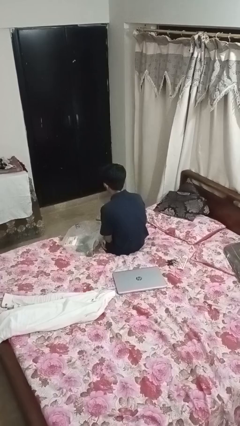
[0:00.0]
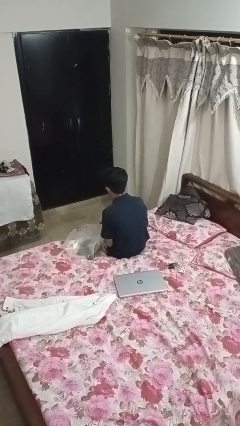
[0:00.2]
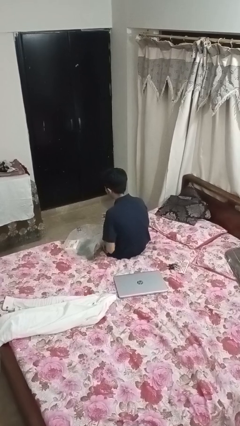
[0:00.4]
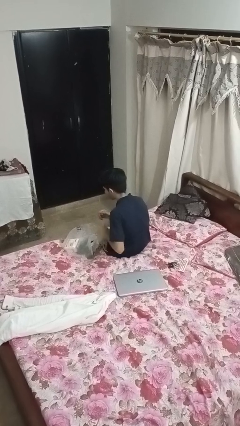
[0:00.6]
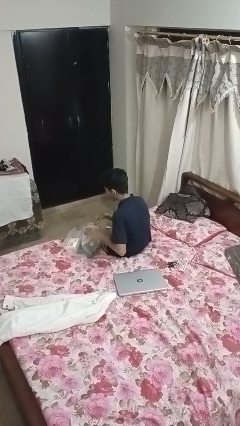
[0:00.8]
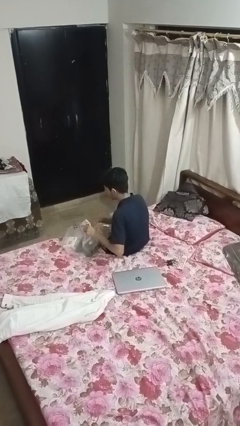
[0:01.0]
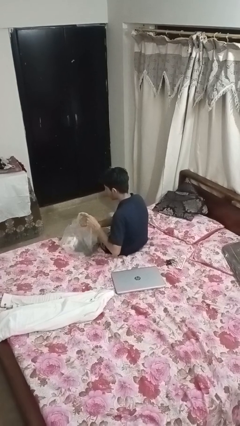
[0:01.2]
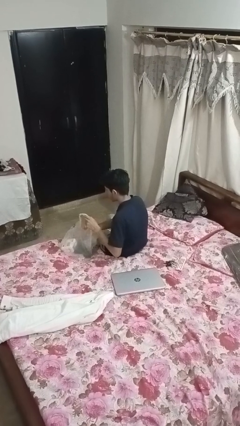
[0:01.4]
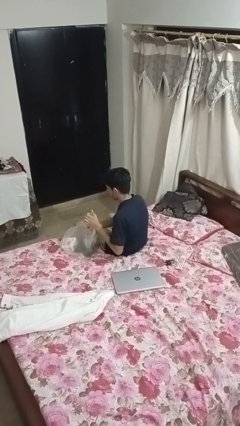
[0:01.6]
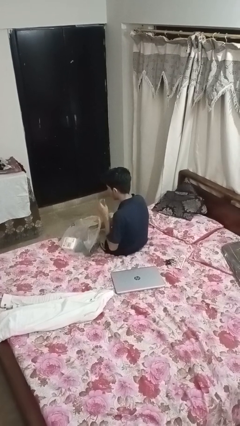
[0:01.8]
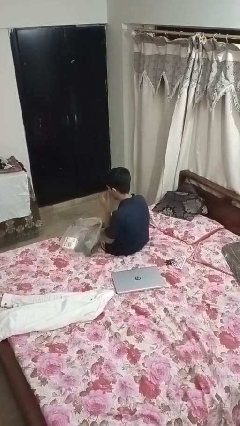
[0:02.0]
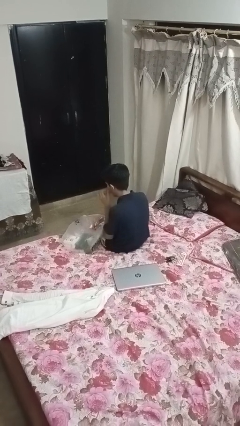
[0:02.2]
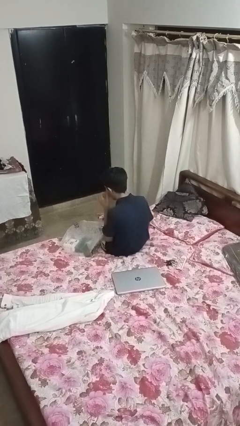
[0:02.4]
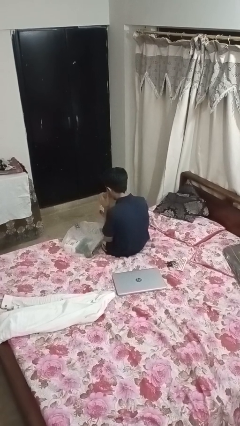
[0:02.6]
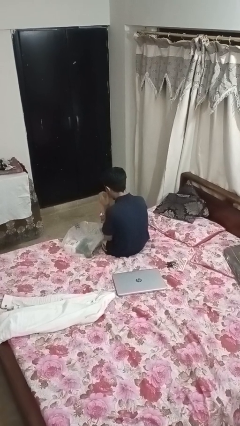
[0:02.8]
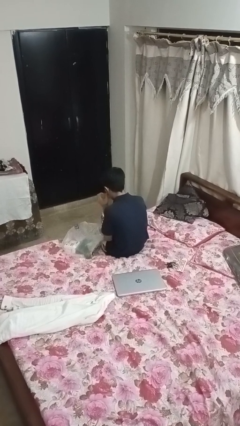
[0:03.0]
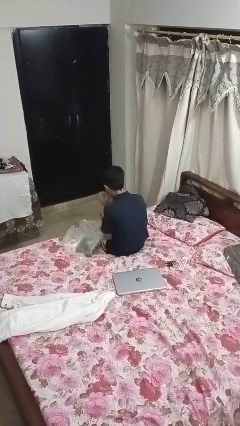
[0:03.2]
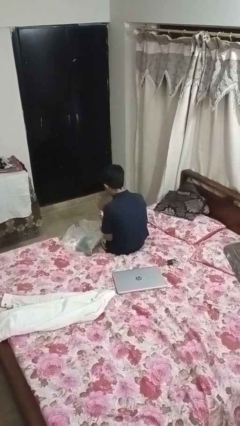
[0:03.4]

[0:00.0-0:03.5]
person takes object from bag

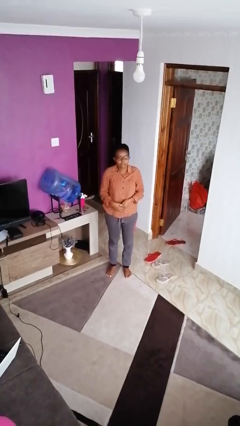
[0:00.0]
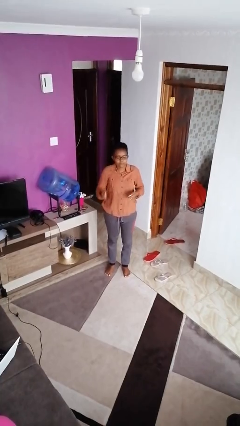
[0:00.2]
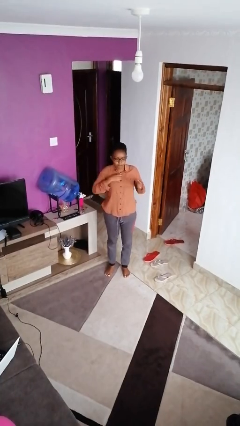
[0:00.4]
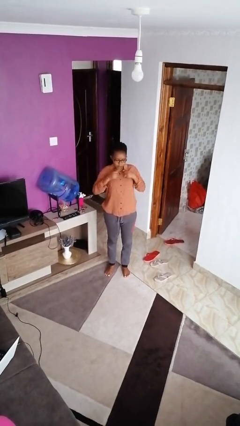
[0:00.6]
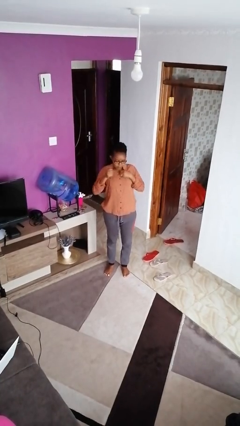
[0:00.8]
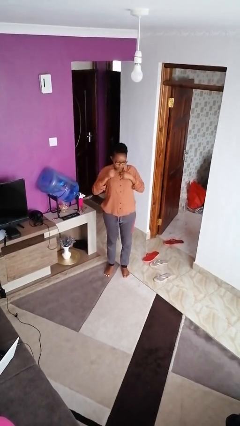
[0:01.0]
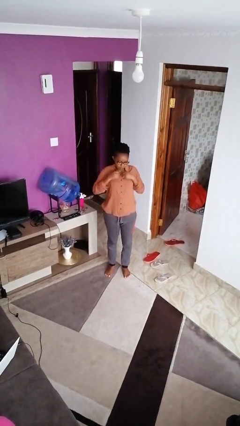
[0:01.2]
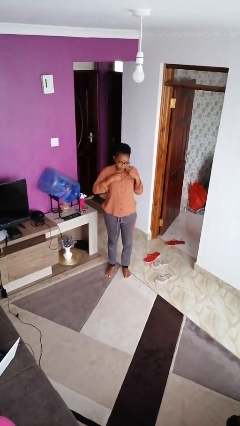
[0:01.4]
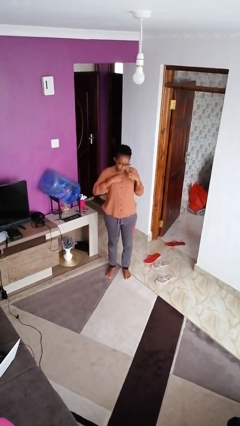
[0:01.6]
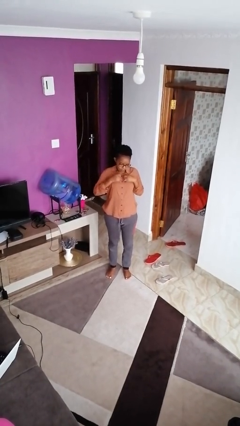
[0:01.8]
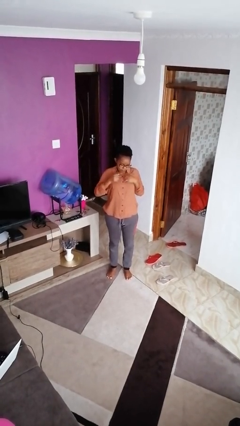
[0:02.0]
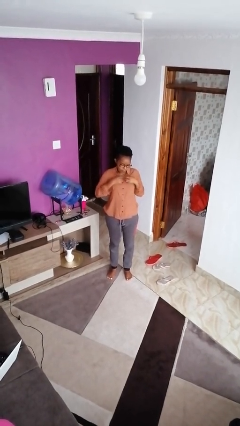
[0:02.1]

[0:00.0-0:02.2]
person drums on chest

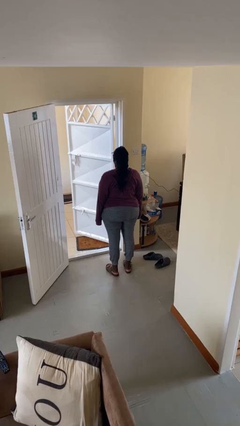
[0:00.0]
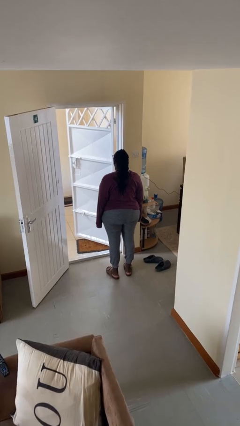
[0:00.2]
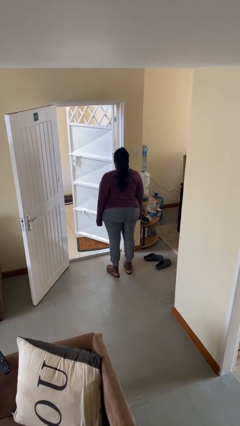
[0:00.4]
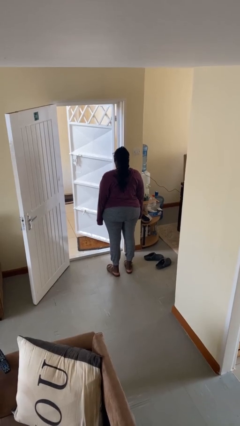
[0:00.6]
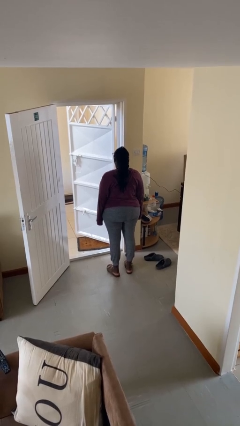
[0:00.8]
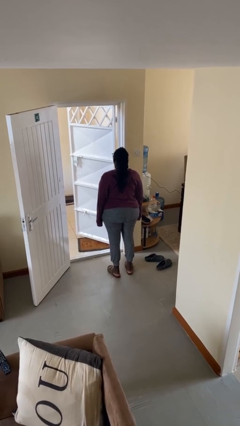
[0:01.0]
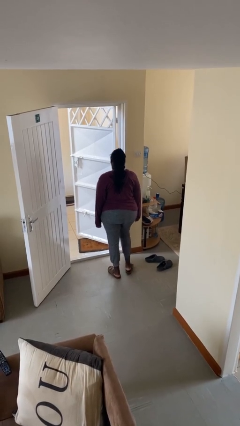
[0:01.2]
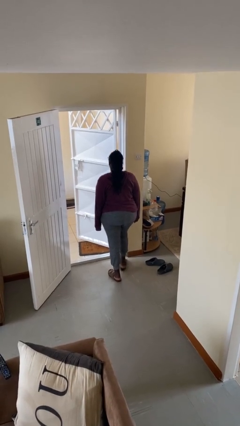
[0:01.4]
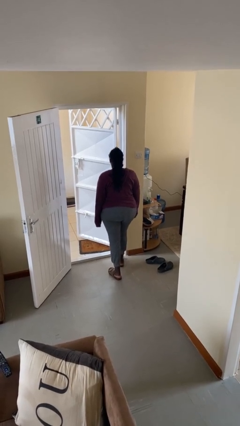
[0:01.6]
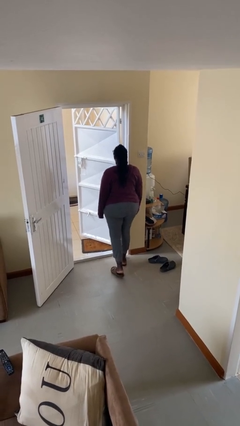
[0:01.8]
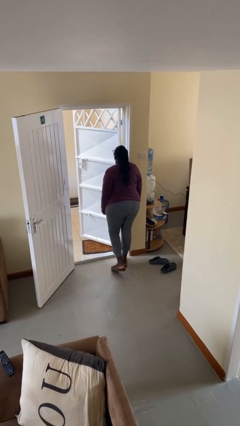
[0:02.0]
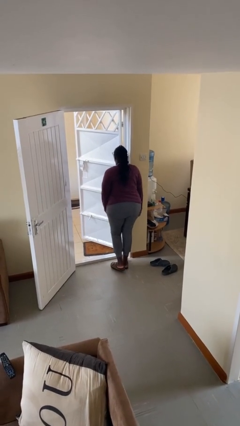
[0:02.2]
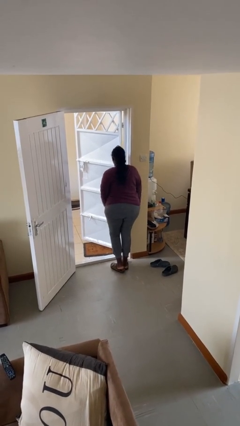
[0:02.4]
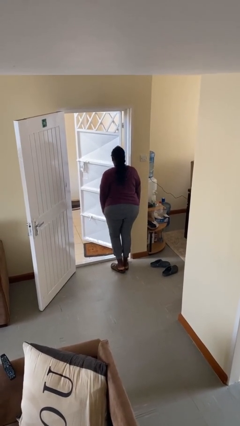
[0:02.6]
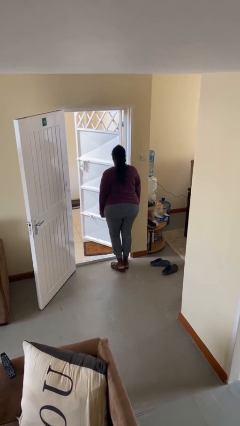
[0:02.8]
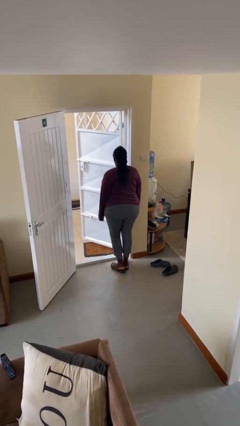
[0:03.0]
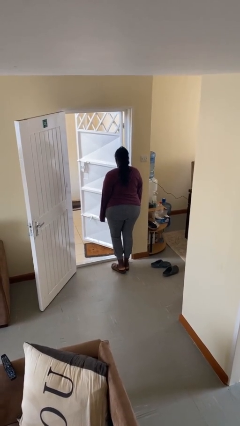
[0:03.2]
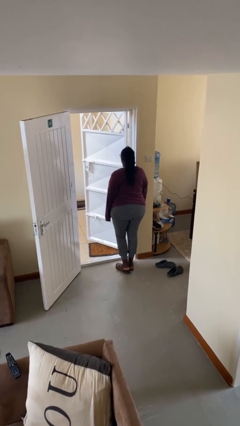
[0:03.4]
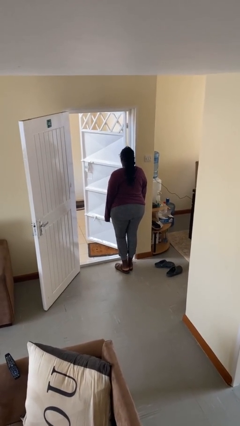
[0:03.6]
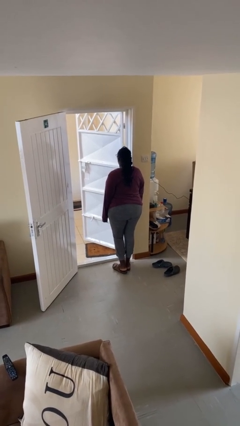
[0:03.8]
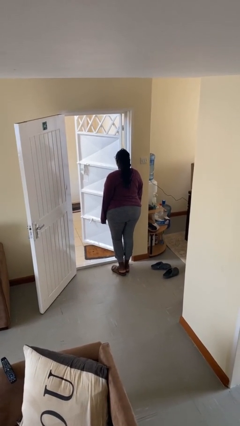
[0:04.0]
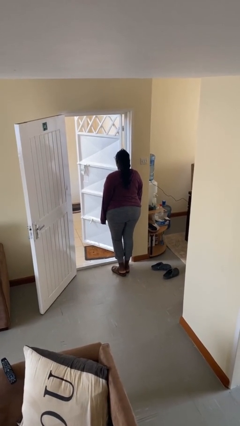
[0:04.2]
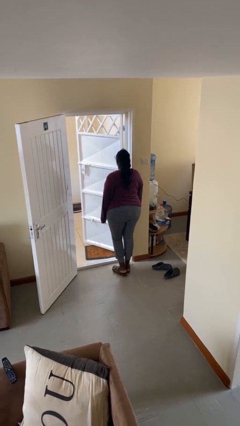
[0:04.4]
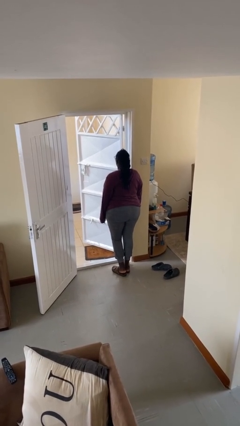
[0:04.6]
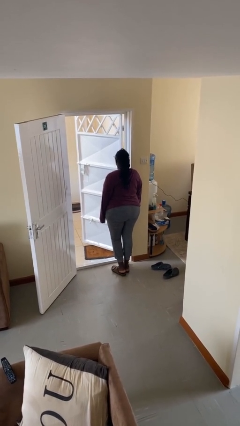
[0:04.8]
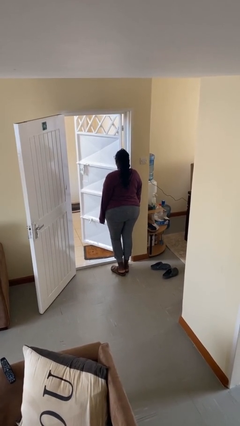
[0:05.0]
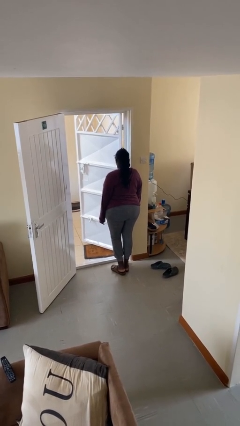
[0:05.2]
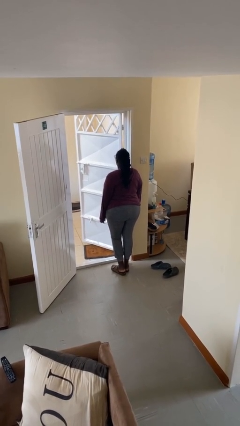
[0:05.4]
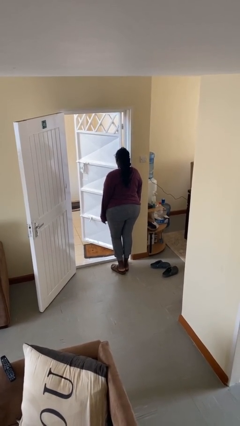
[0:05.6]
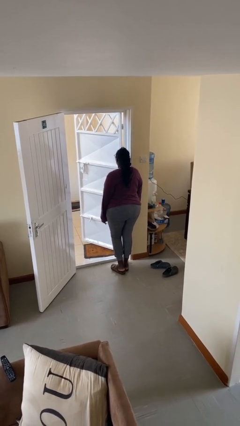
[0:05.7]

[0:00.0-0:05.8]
person bumps into wall

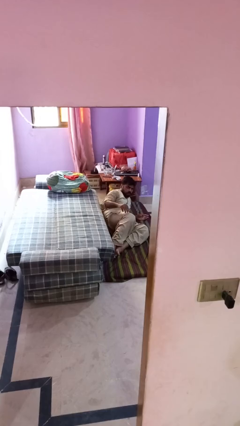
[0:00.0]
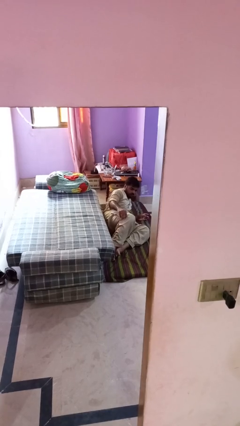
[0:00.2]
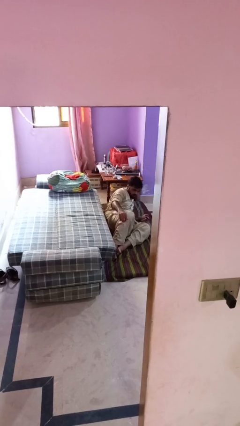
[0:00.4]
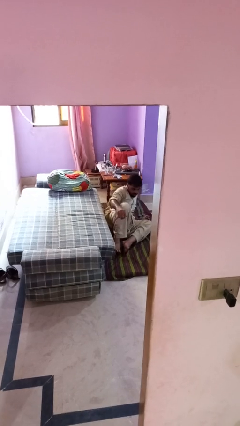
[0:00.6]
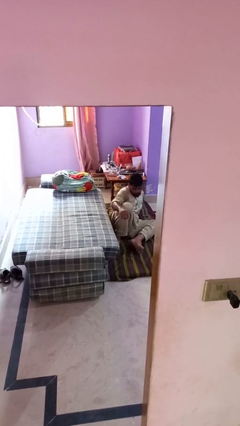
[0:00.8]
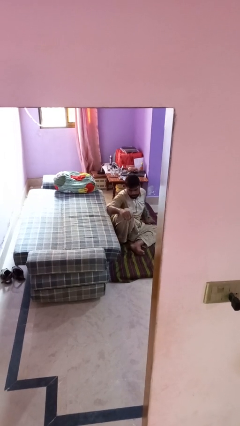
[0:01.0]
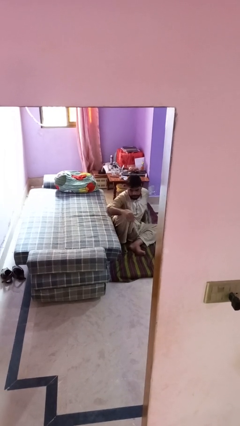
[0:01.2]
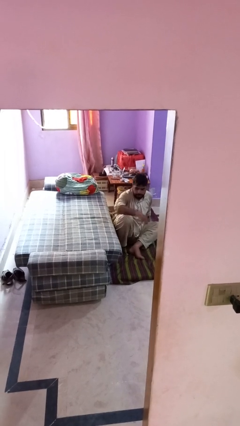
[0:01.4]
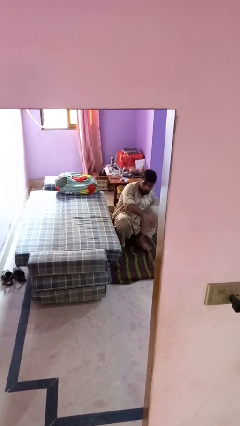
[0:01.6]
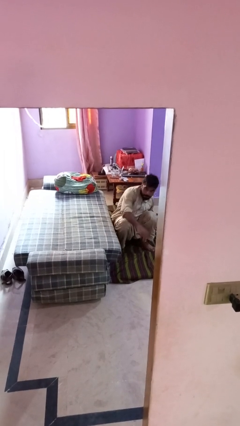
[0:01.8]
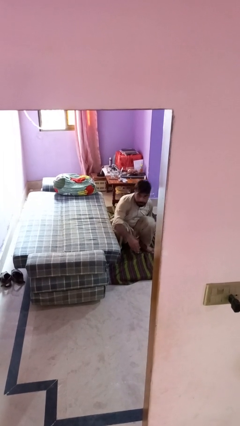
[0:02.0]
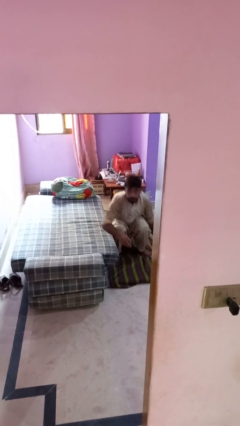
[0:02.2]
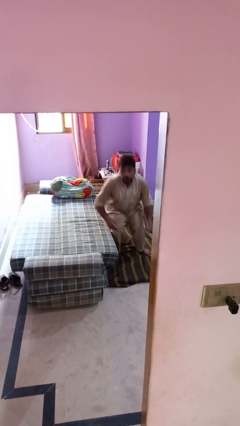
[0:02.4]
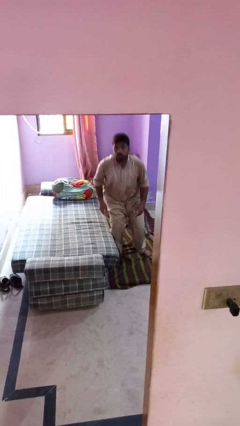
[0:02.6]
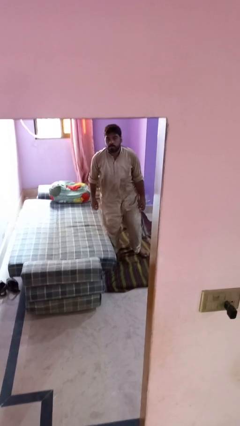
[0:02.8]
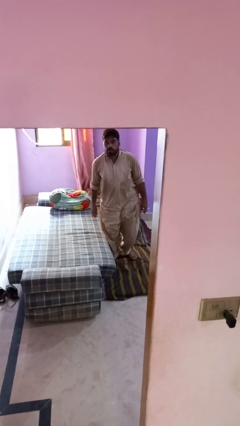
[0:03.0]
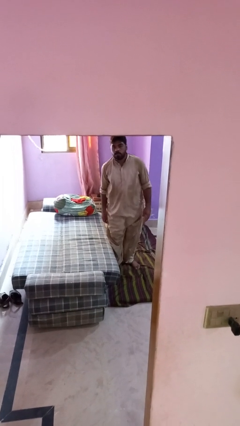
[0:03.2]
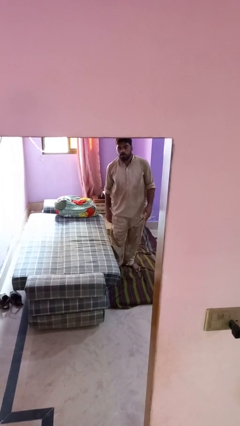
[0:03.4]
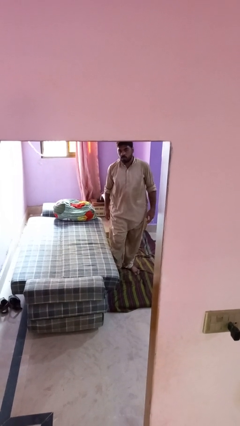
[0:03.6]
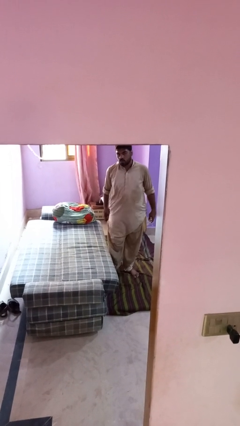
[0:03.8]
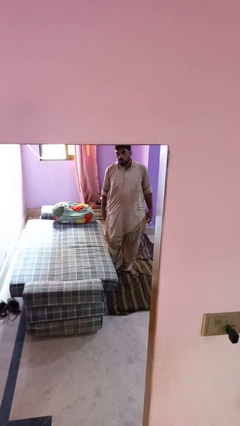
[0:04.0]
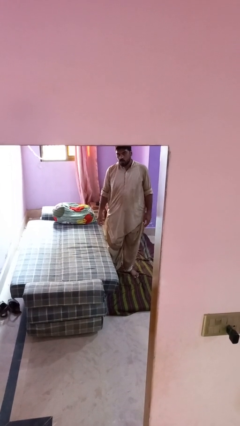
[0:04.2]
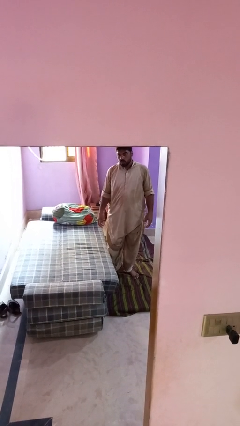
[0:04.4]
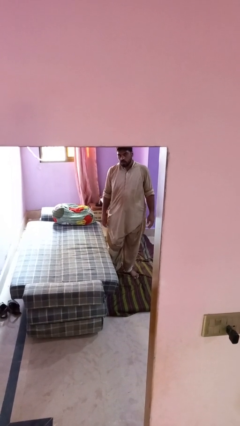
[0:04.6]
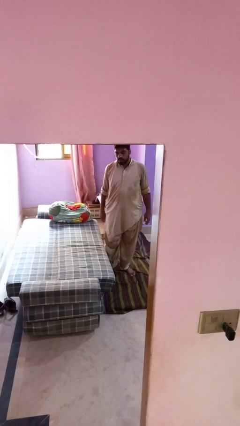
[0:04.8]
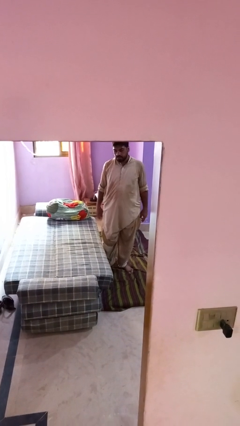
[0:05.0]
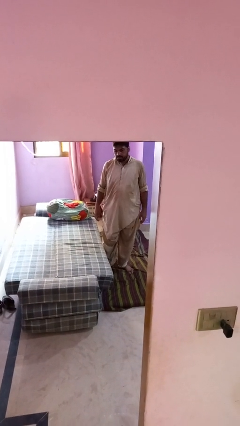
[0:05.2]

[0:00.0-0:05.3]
person stands up from floor

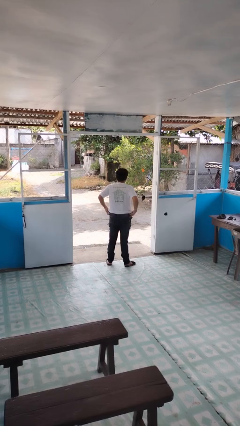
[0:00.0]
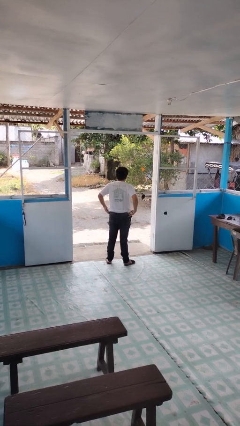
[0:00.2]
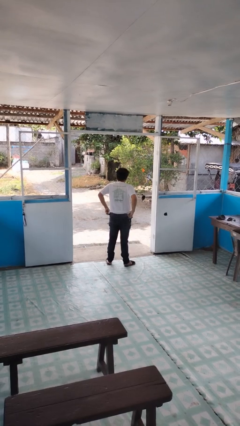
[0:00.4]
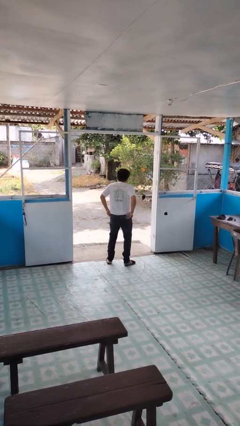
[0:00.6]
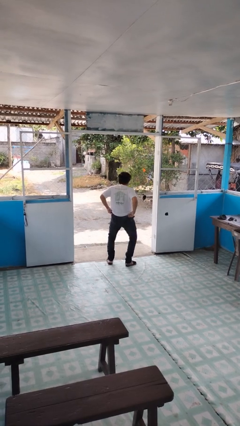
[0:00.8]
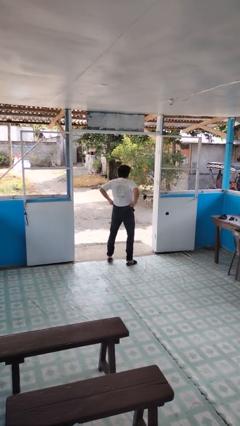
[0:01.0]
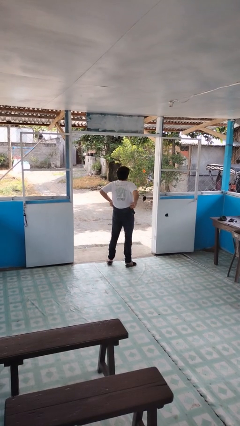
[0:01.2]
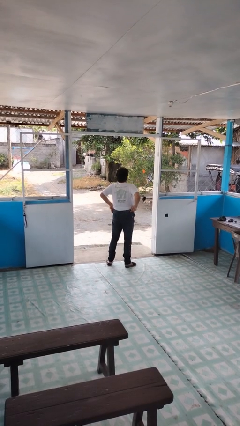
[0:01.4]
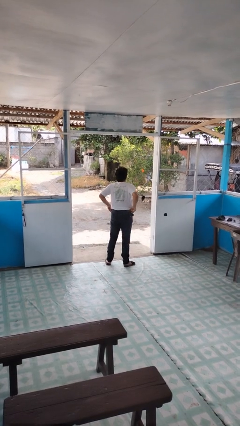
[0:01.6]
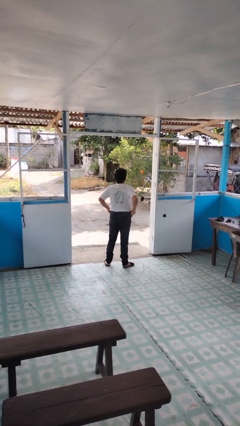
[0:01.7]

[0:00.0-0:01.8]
person hikes up pants
